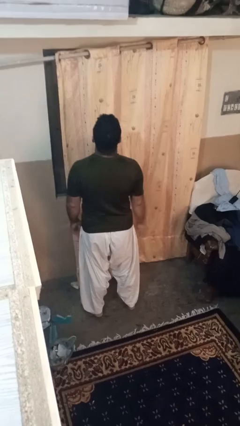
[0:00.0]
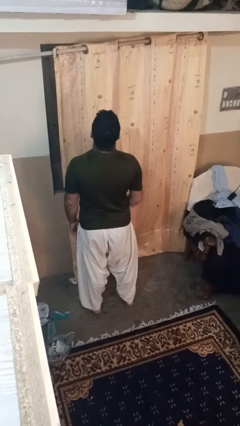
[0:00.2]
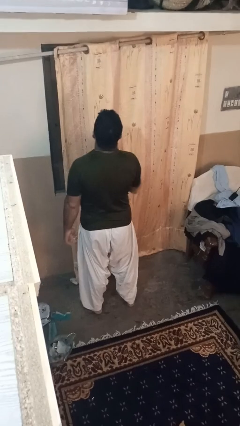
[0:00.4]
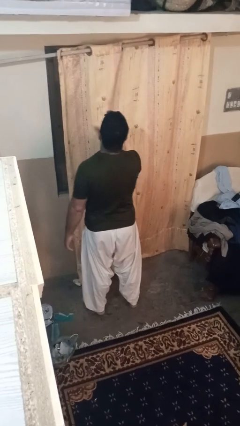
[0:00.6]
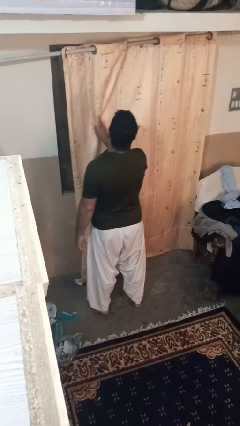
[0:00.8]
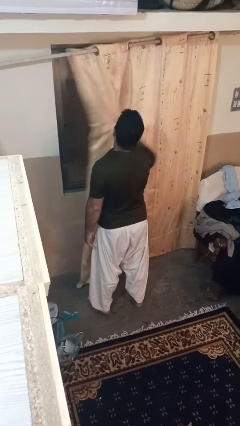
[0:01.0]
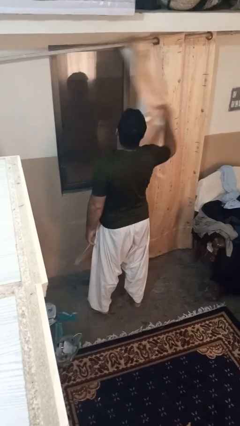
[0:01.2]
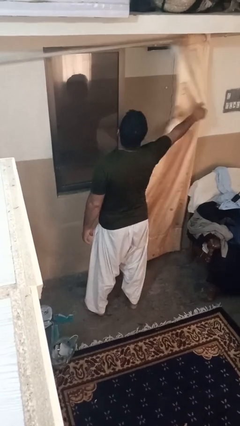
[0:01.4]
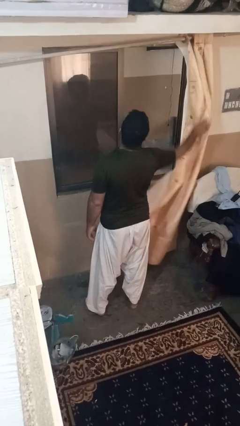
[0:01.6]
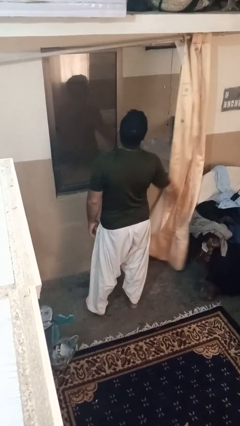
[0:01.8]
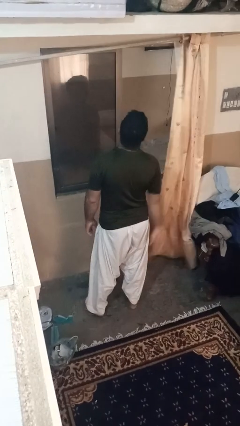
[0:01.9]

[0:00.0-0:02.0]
person opens curtains

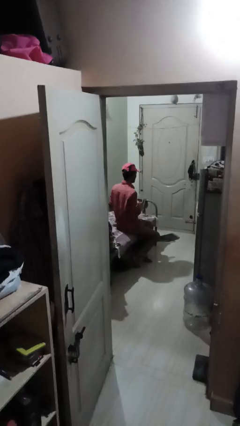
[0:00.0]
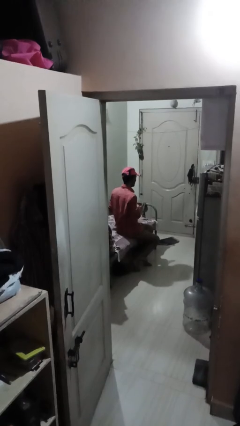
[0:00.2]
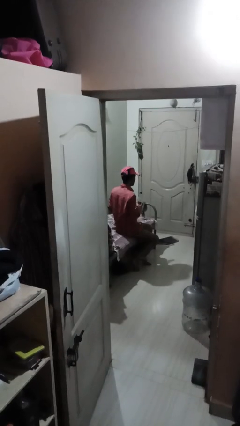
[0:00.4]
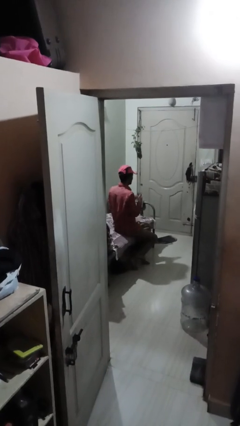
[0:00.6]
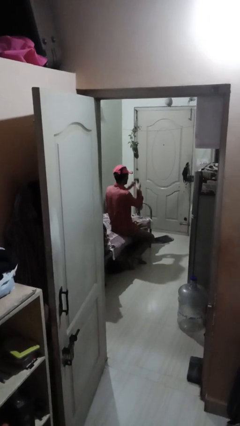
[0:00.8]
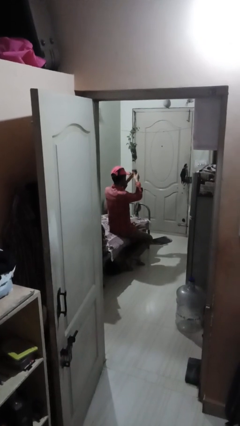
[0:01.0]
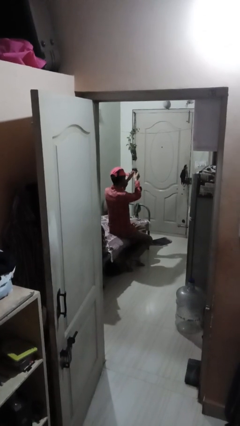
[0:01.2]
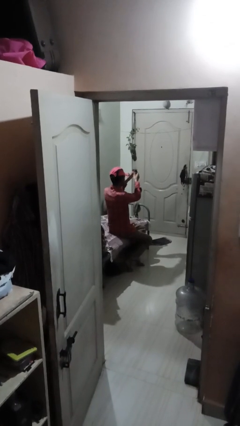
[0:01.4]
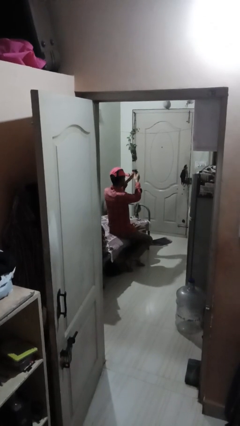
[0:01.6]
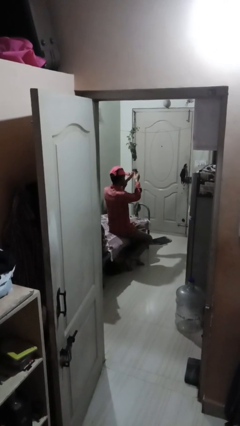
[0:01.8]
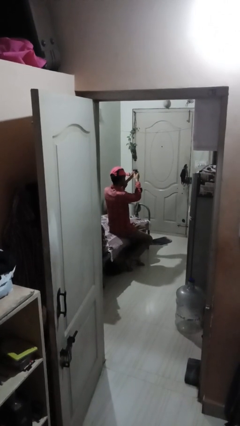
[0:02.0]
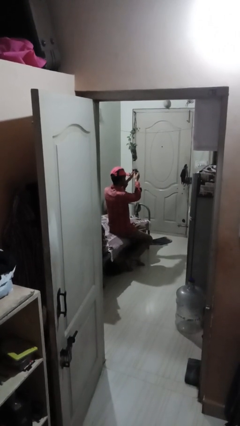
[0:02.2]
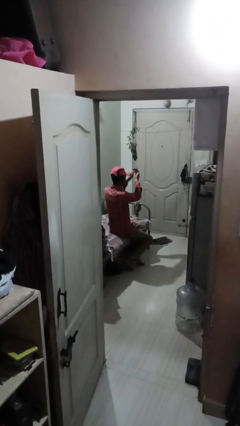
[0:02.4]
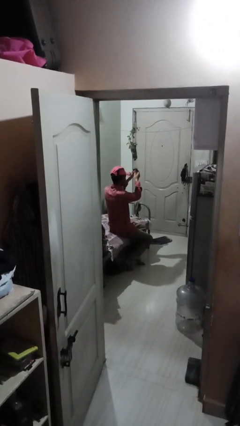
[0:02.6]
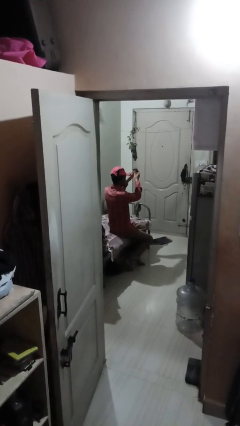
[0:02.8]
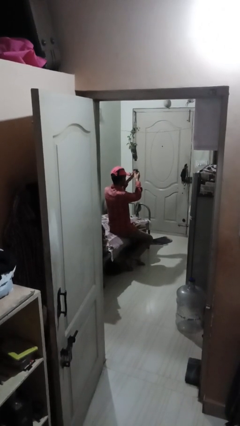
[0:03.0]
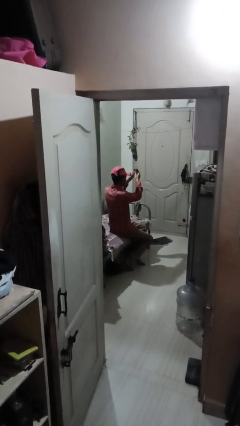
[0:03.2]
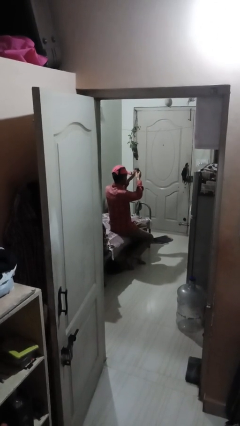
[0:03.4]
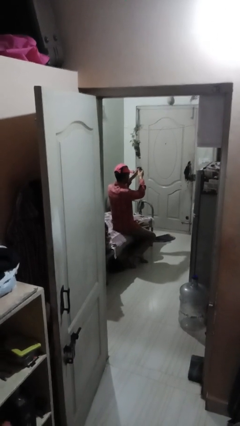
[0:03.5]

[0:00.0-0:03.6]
person squeezes object

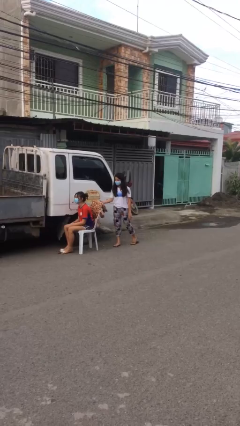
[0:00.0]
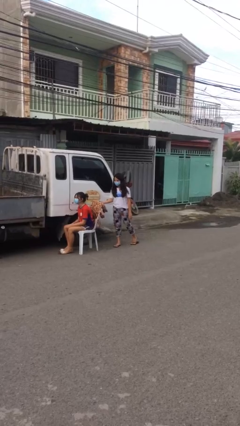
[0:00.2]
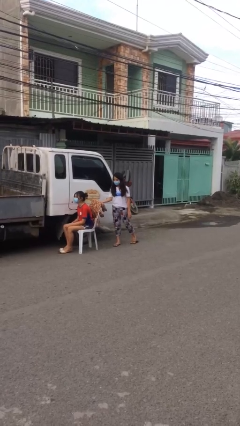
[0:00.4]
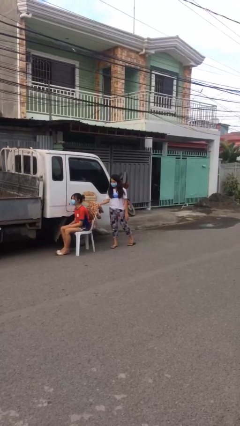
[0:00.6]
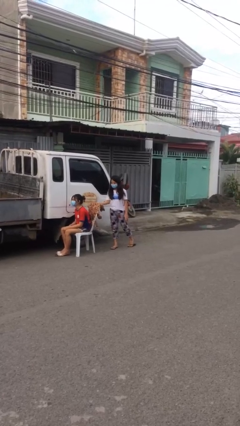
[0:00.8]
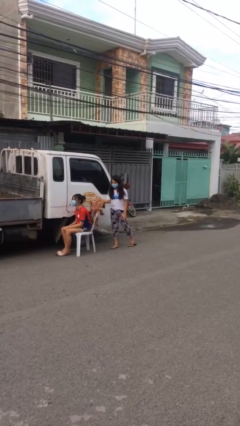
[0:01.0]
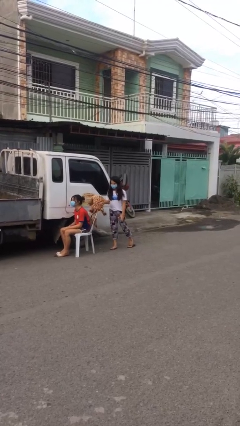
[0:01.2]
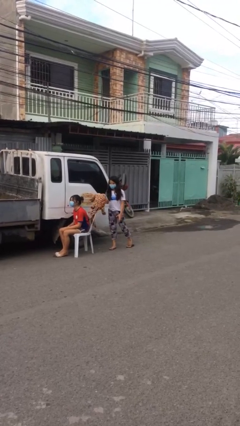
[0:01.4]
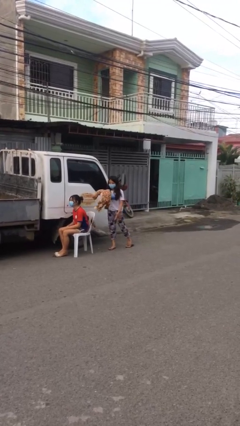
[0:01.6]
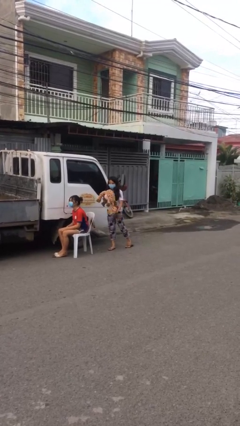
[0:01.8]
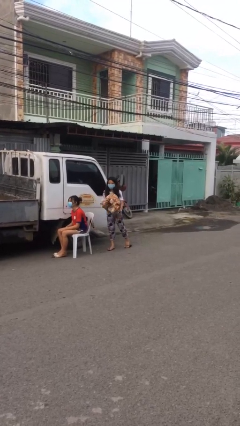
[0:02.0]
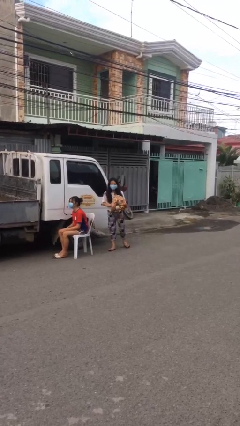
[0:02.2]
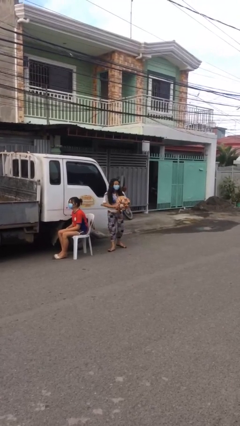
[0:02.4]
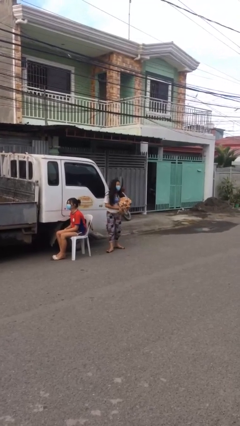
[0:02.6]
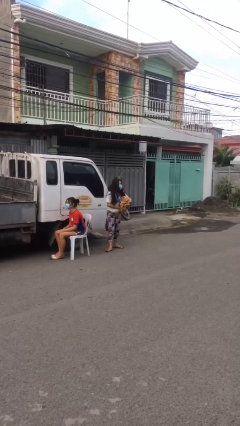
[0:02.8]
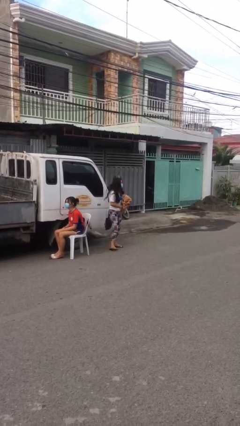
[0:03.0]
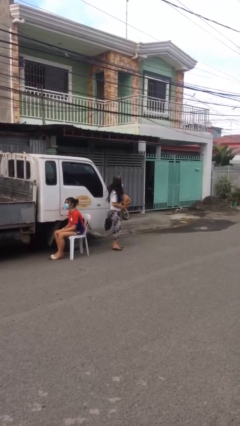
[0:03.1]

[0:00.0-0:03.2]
person steals object from person

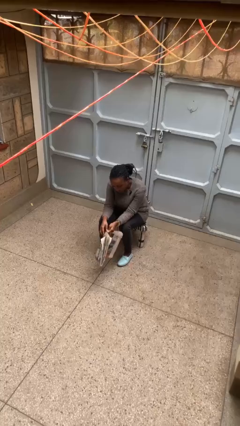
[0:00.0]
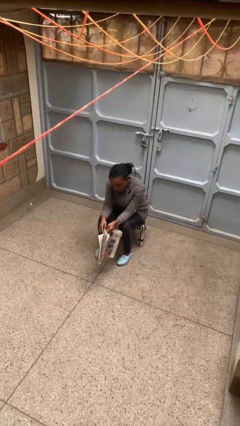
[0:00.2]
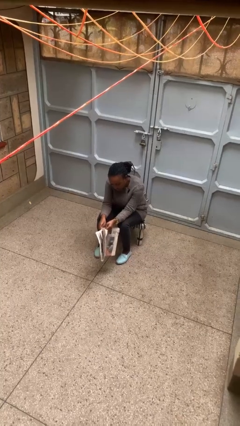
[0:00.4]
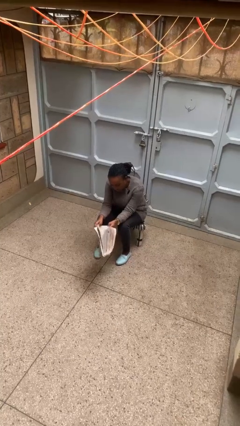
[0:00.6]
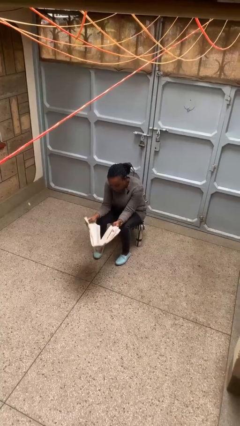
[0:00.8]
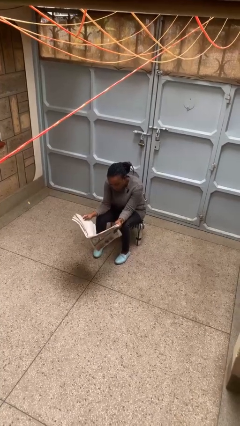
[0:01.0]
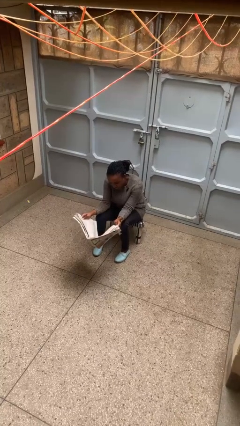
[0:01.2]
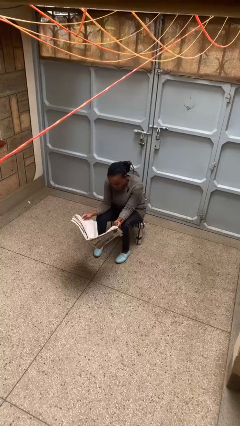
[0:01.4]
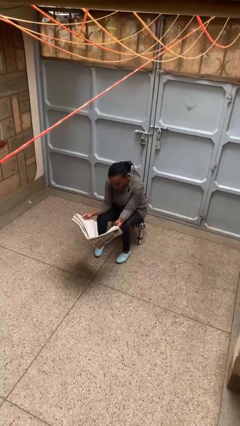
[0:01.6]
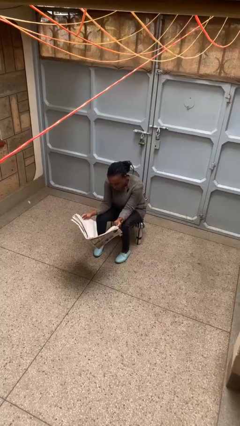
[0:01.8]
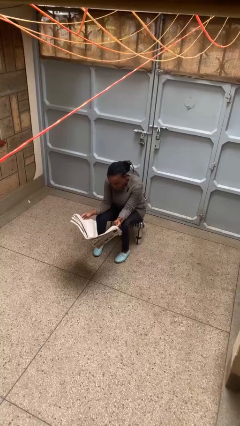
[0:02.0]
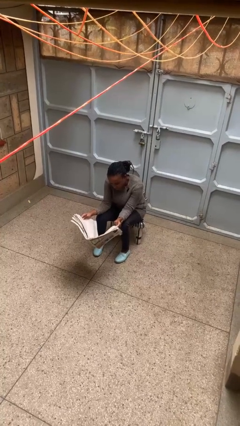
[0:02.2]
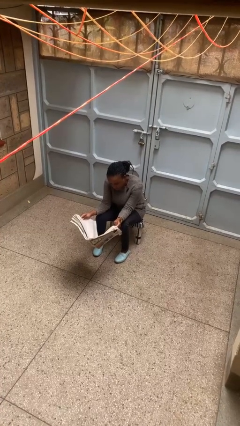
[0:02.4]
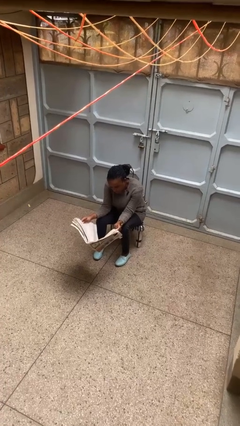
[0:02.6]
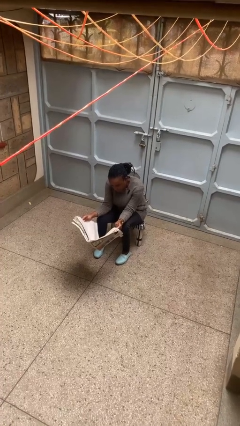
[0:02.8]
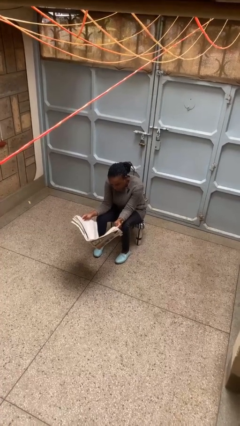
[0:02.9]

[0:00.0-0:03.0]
person reads newspaper

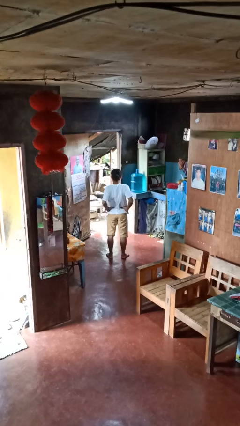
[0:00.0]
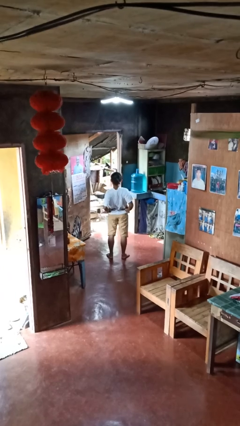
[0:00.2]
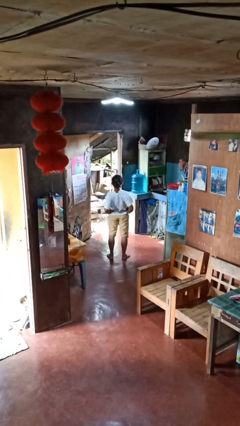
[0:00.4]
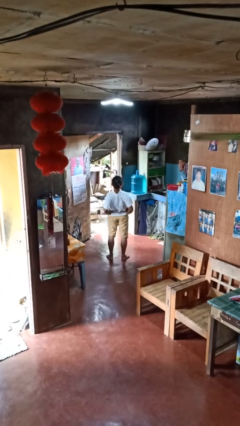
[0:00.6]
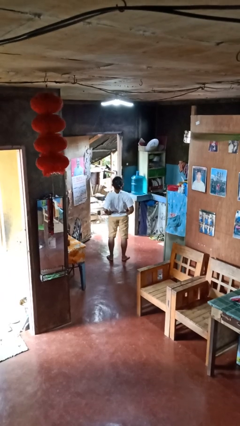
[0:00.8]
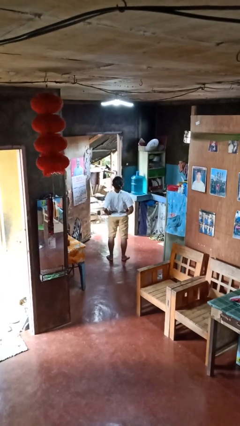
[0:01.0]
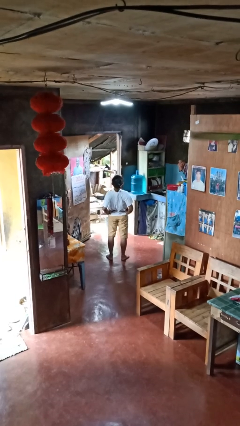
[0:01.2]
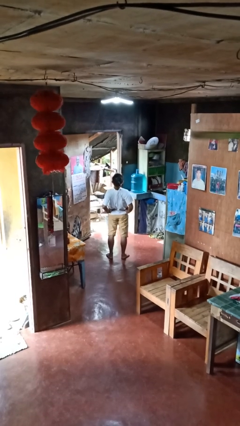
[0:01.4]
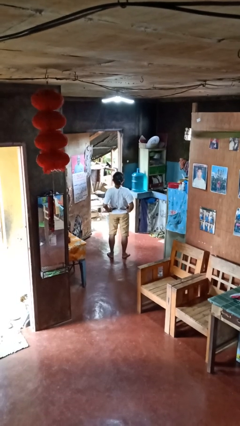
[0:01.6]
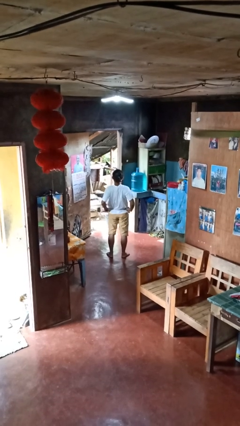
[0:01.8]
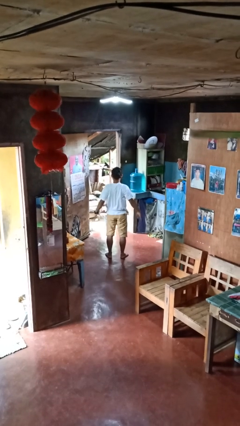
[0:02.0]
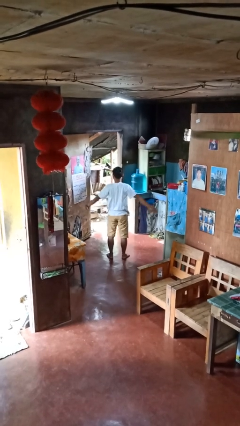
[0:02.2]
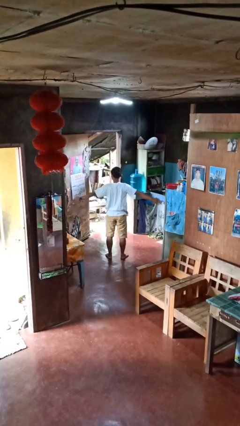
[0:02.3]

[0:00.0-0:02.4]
person stretches back

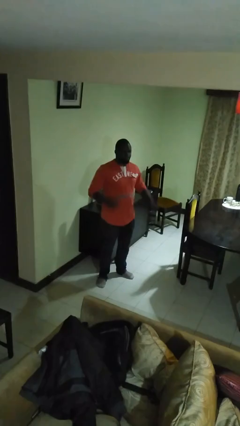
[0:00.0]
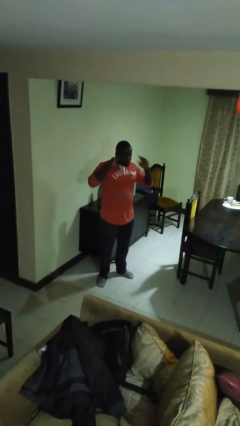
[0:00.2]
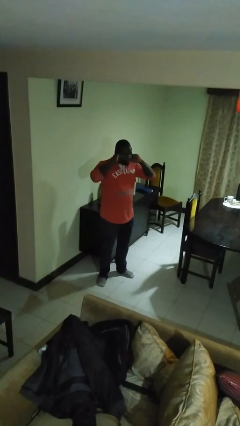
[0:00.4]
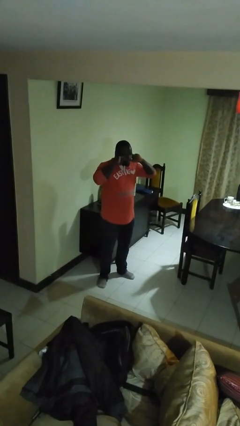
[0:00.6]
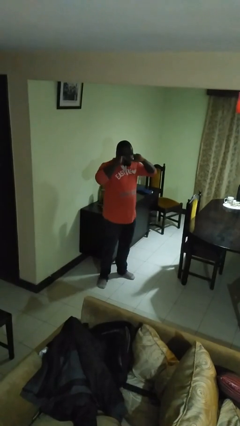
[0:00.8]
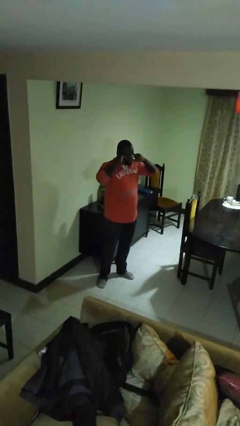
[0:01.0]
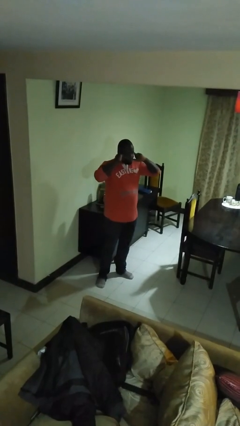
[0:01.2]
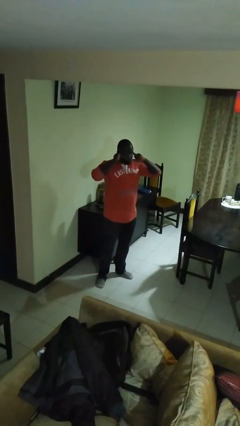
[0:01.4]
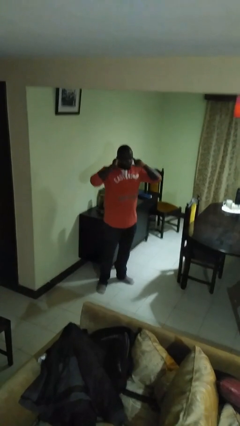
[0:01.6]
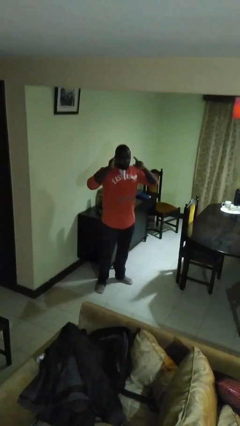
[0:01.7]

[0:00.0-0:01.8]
person puts fingers in ear

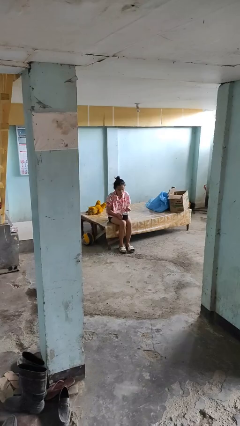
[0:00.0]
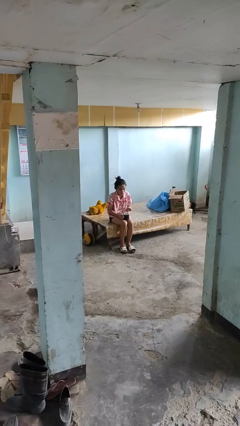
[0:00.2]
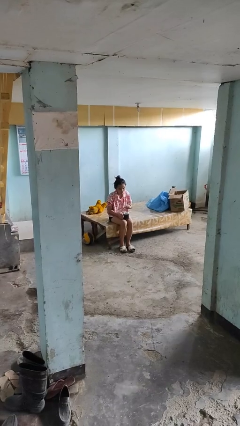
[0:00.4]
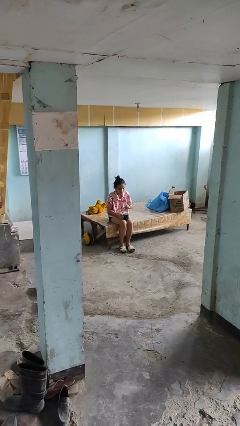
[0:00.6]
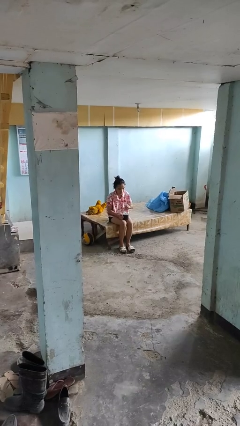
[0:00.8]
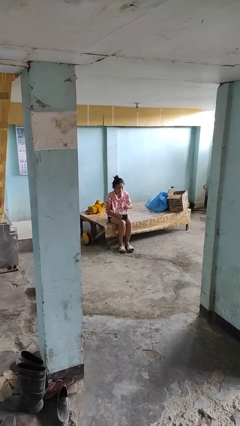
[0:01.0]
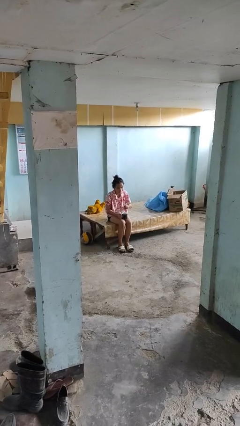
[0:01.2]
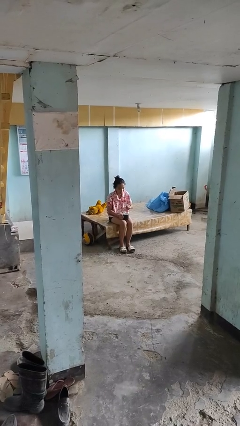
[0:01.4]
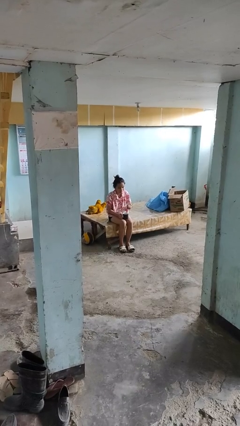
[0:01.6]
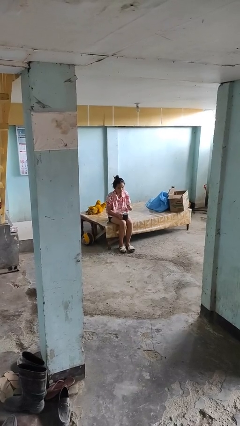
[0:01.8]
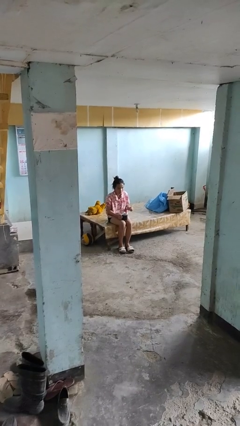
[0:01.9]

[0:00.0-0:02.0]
person stirs mug
